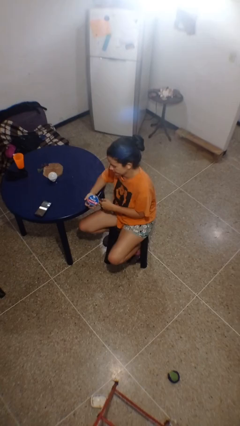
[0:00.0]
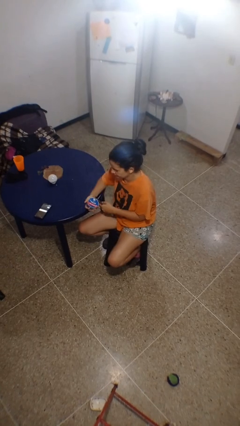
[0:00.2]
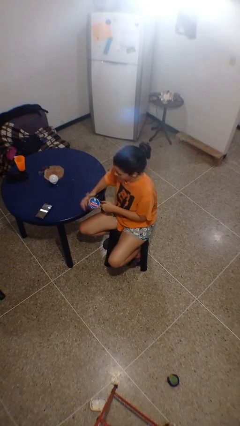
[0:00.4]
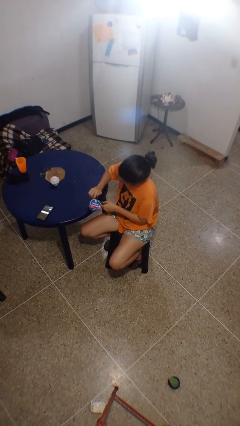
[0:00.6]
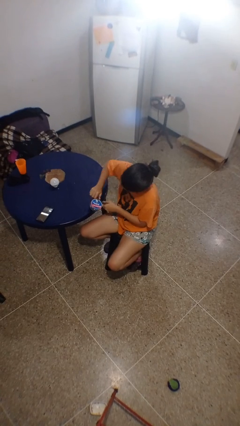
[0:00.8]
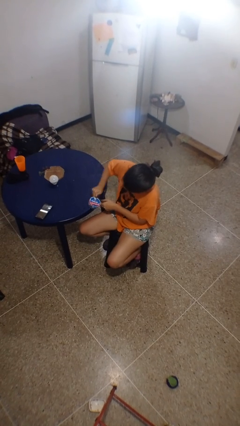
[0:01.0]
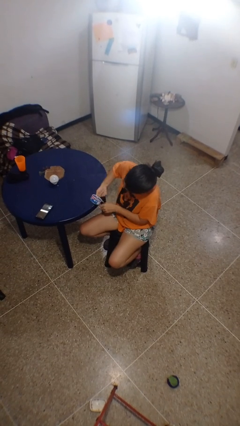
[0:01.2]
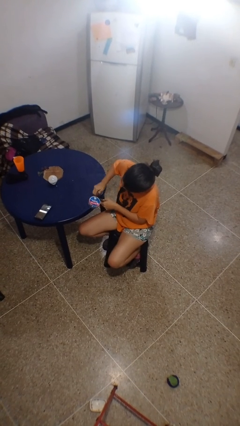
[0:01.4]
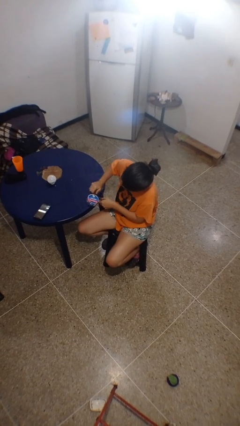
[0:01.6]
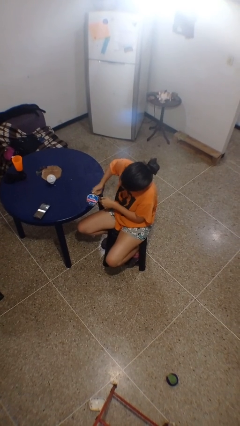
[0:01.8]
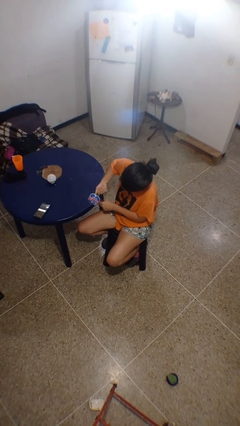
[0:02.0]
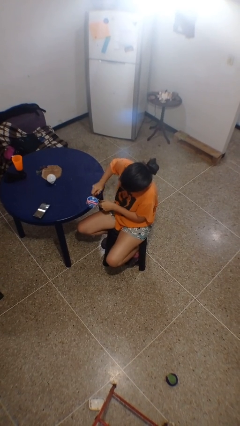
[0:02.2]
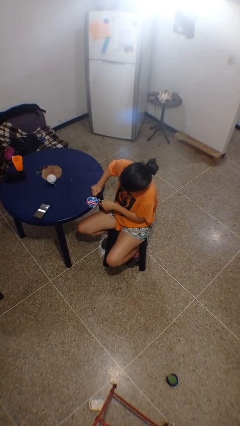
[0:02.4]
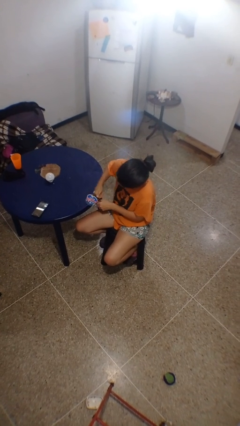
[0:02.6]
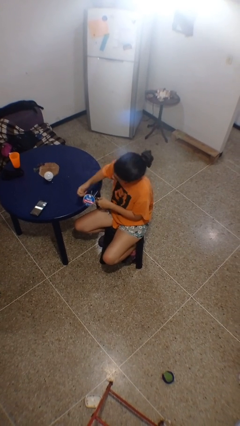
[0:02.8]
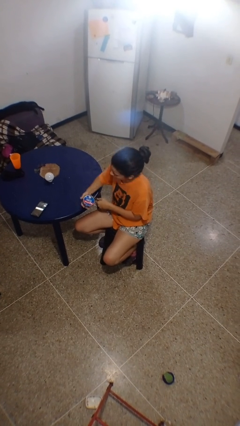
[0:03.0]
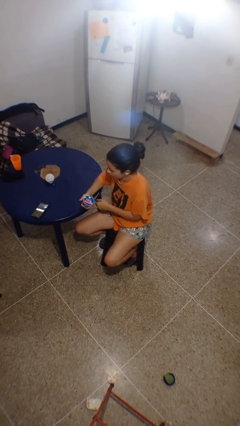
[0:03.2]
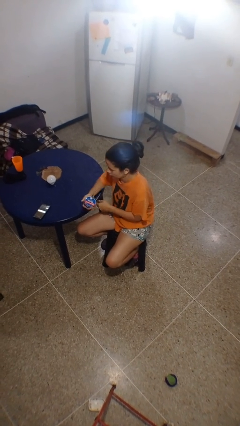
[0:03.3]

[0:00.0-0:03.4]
person opens can with can opener

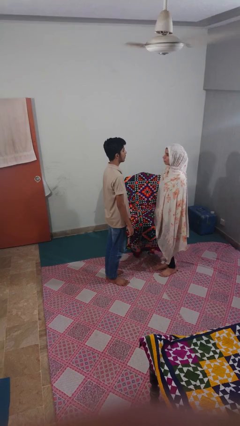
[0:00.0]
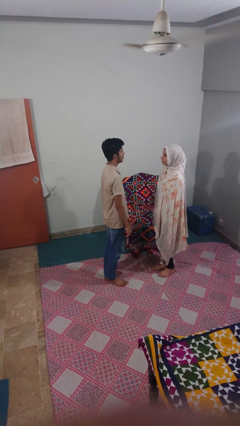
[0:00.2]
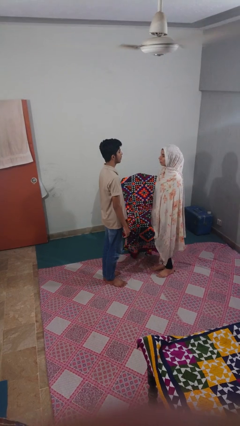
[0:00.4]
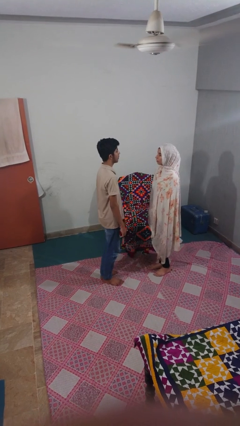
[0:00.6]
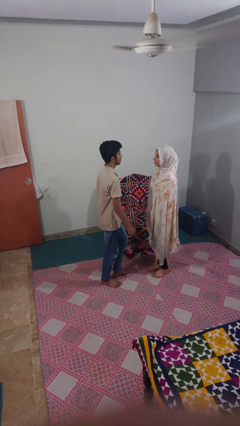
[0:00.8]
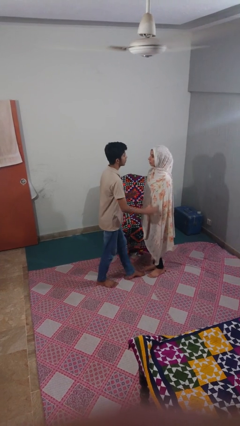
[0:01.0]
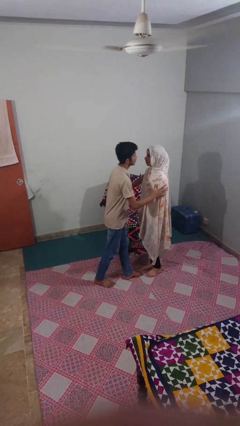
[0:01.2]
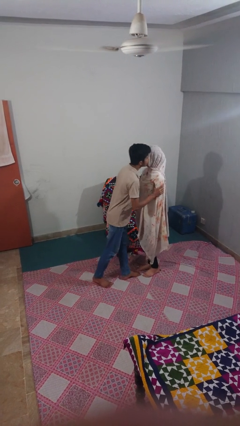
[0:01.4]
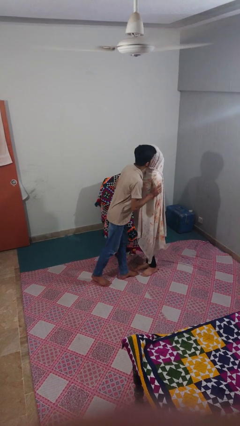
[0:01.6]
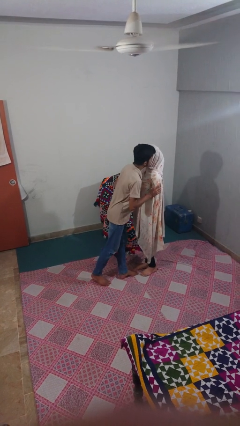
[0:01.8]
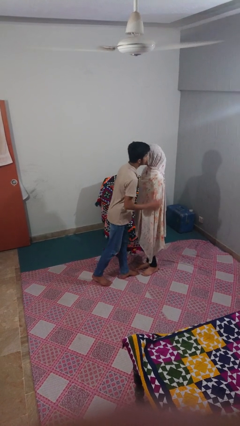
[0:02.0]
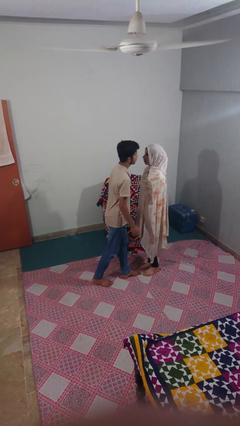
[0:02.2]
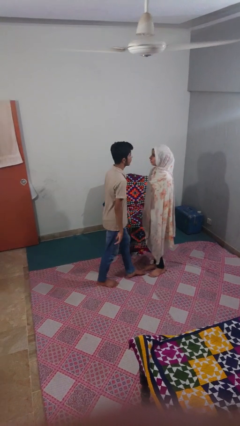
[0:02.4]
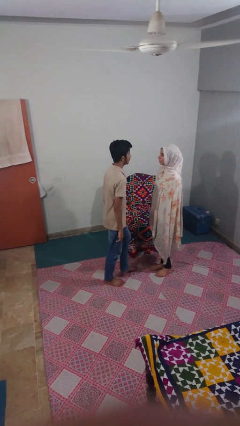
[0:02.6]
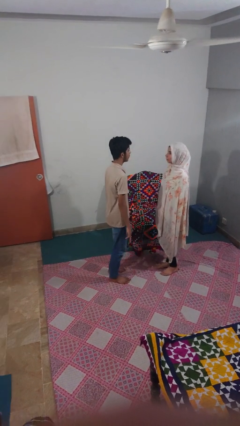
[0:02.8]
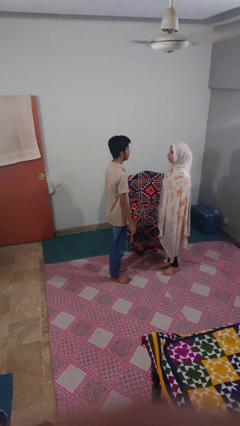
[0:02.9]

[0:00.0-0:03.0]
person kisses cheek of person

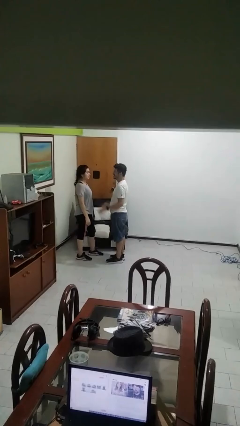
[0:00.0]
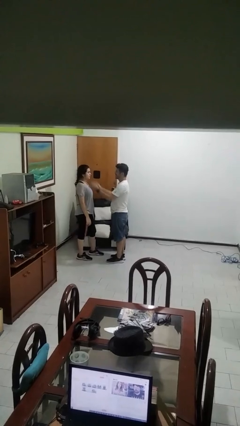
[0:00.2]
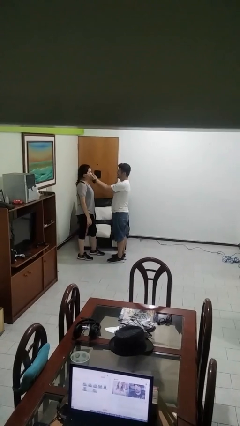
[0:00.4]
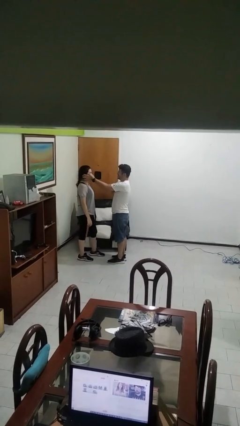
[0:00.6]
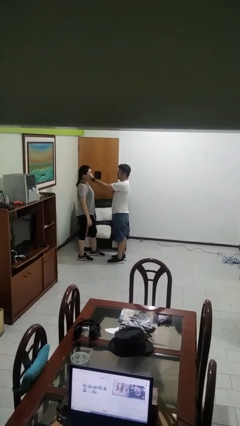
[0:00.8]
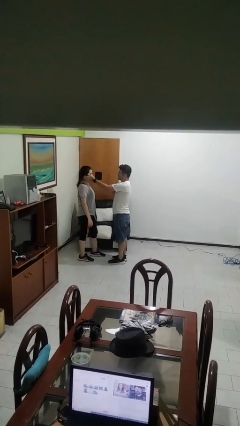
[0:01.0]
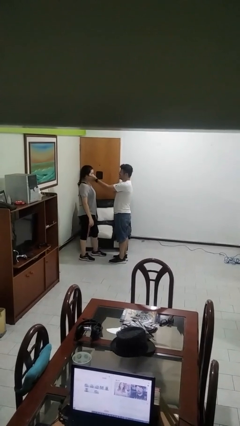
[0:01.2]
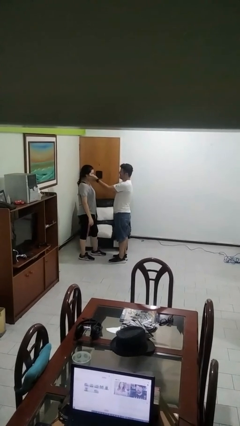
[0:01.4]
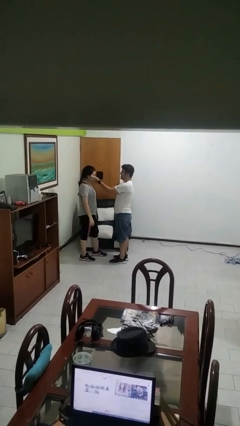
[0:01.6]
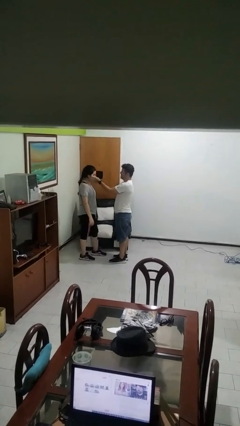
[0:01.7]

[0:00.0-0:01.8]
person touches face of person

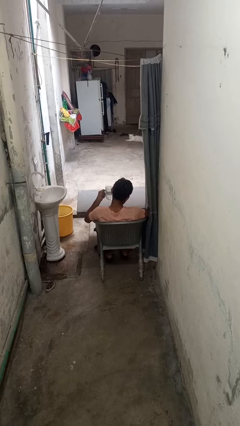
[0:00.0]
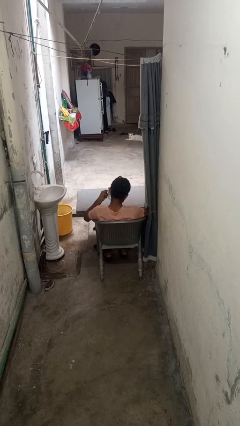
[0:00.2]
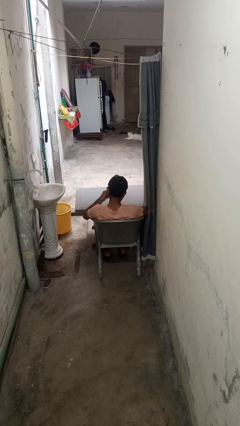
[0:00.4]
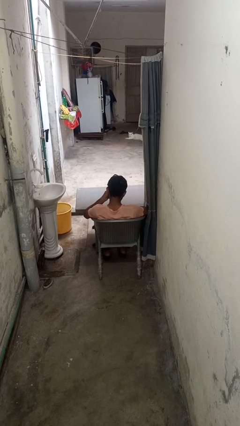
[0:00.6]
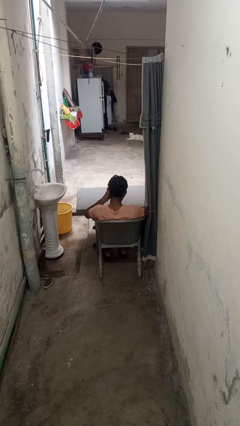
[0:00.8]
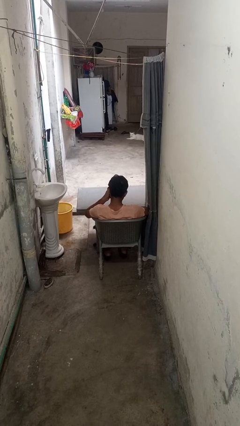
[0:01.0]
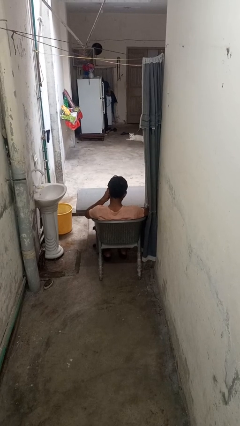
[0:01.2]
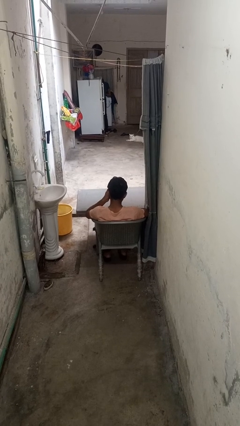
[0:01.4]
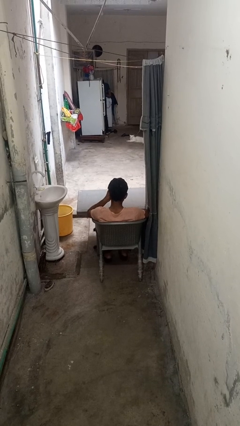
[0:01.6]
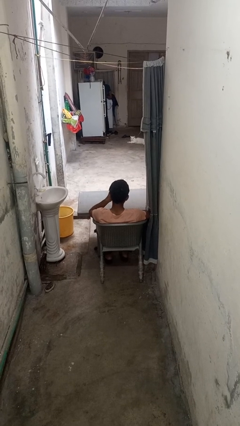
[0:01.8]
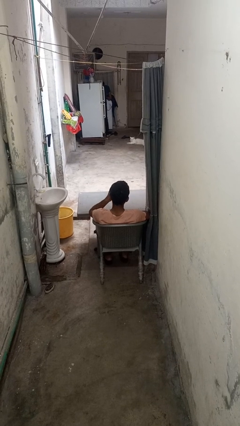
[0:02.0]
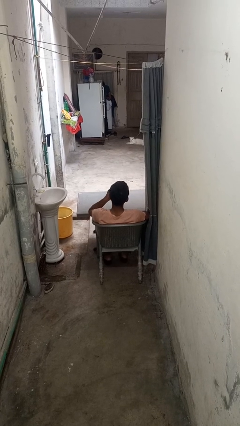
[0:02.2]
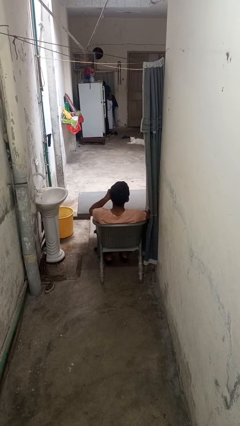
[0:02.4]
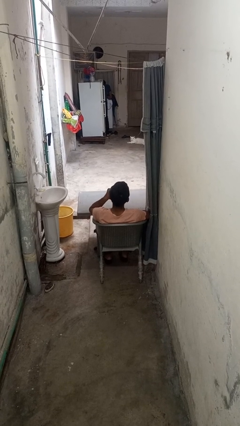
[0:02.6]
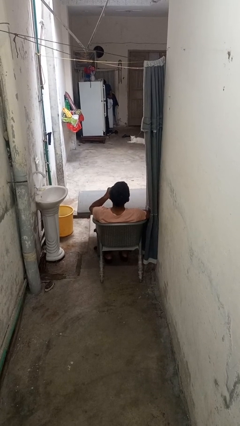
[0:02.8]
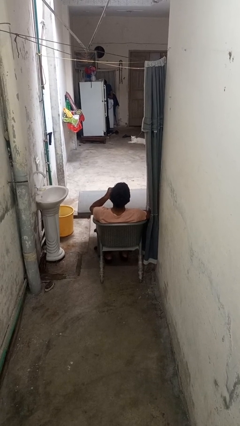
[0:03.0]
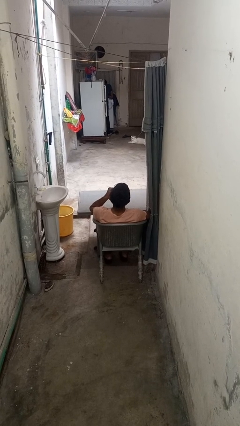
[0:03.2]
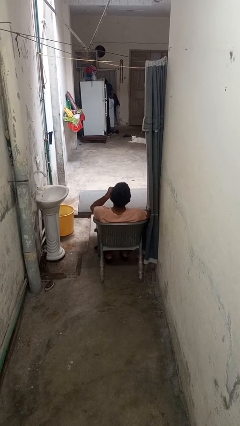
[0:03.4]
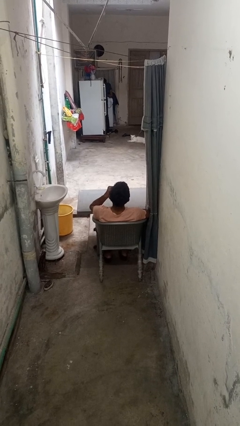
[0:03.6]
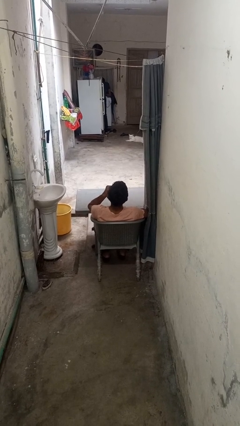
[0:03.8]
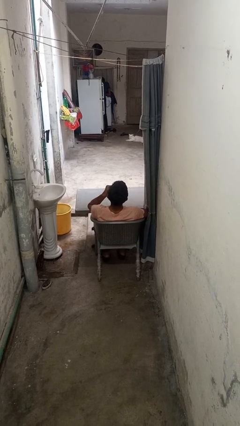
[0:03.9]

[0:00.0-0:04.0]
person drinks from mug

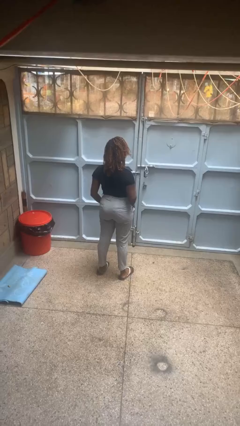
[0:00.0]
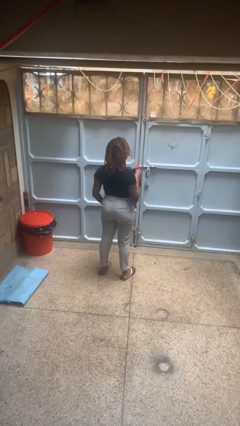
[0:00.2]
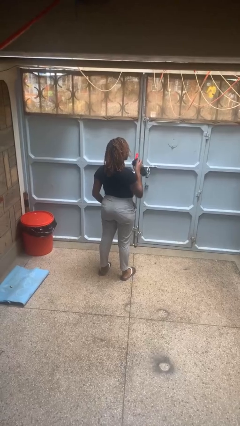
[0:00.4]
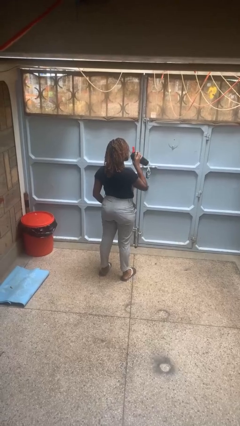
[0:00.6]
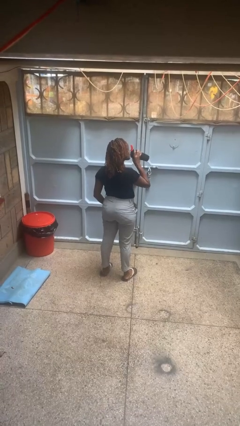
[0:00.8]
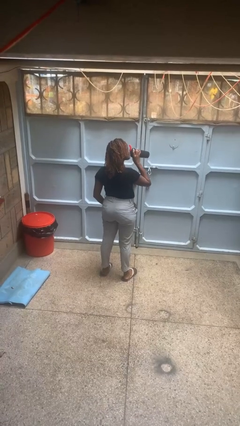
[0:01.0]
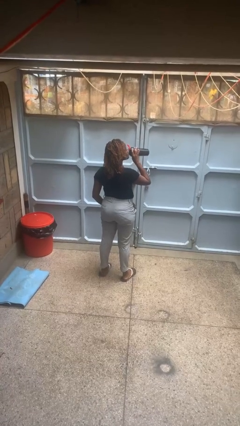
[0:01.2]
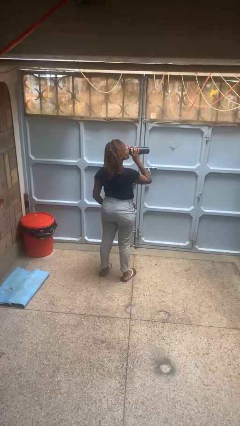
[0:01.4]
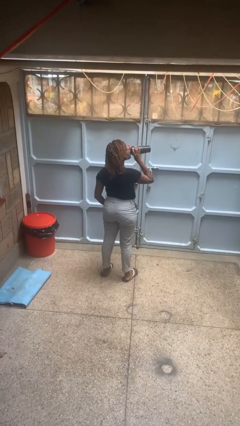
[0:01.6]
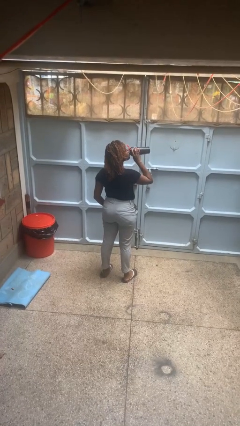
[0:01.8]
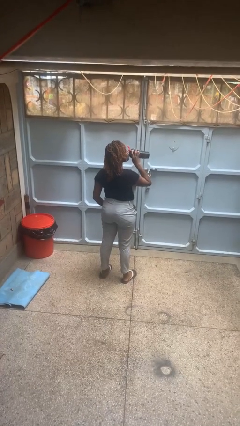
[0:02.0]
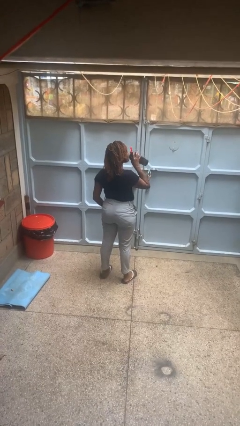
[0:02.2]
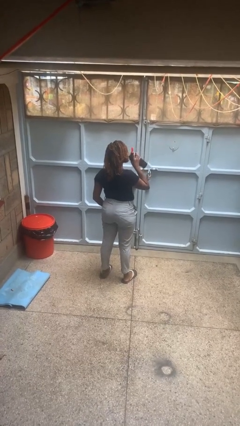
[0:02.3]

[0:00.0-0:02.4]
person drinks from bottle

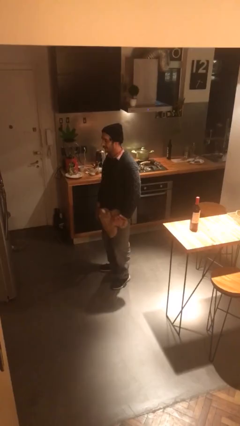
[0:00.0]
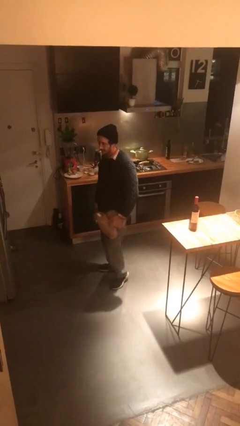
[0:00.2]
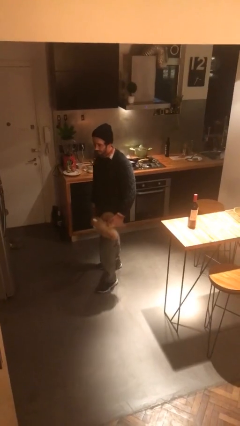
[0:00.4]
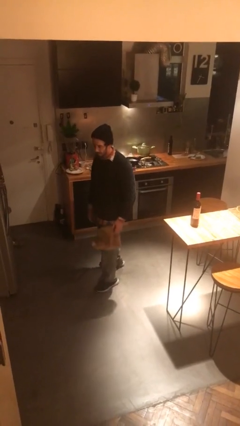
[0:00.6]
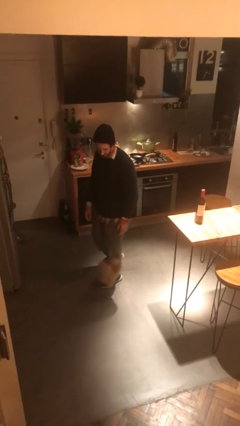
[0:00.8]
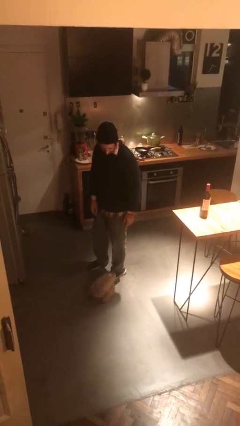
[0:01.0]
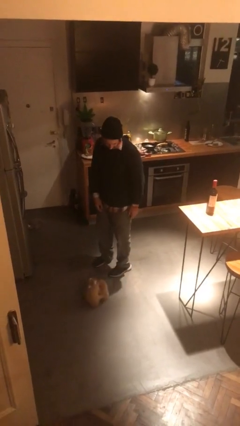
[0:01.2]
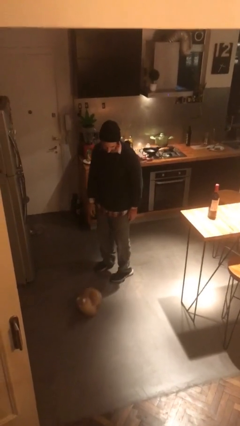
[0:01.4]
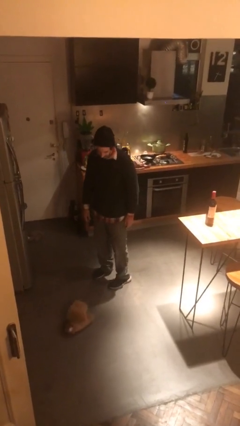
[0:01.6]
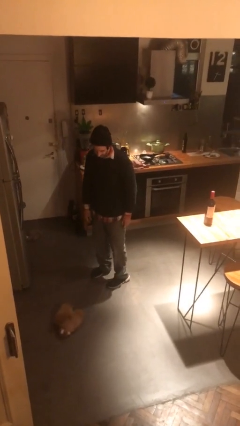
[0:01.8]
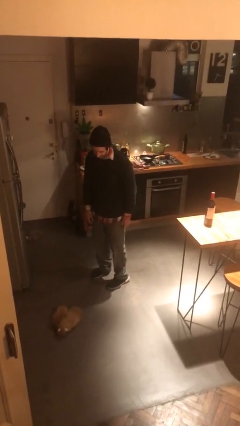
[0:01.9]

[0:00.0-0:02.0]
person drops object

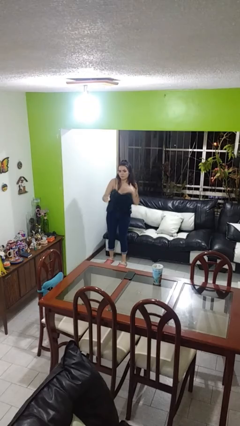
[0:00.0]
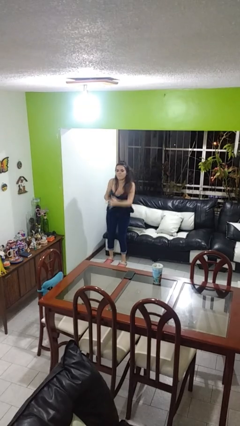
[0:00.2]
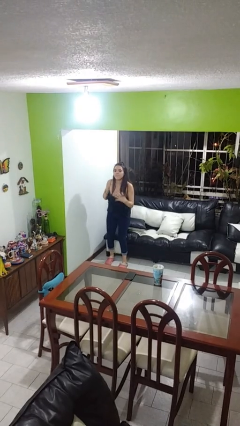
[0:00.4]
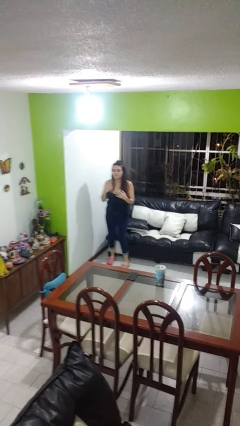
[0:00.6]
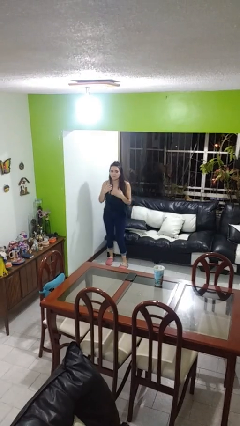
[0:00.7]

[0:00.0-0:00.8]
person karate chop
